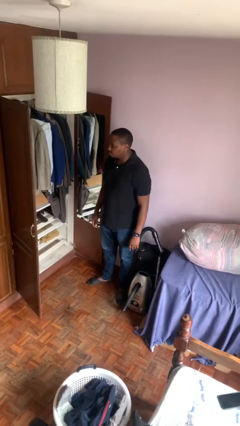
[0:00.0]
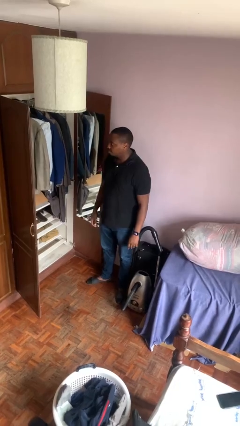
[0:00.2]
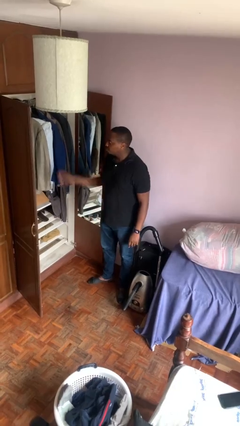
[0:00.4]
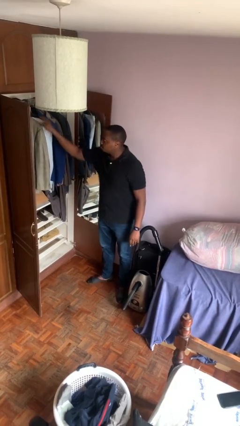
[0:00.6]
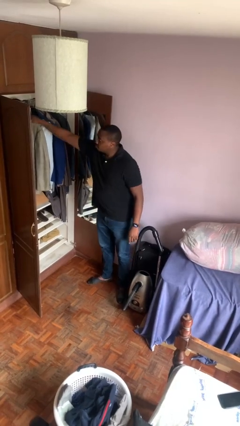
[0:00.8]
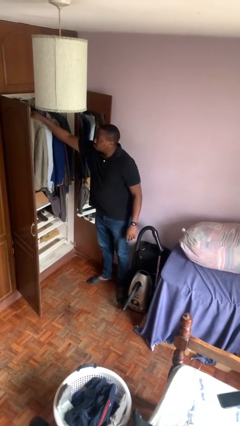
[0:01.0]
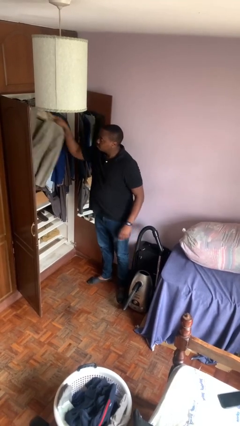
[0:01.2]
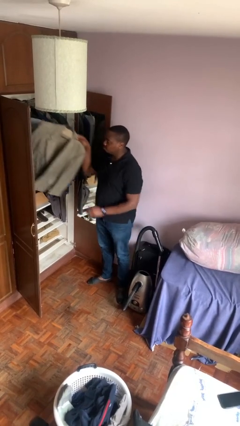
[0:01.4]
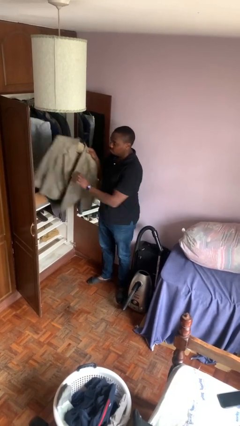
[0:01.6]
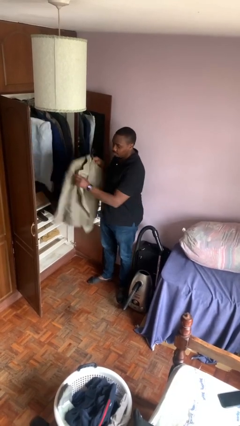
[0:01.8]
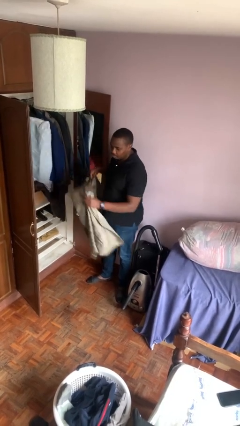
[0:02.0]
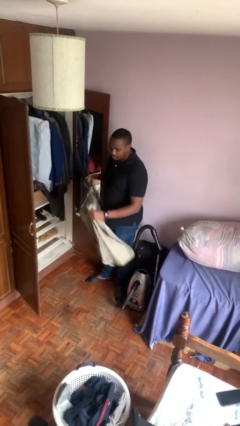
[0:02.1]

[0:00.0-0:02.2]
person takes clothes from closet

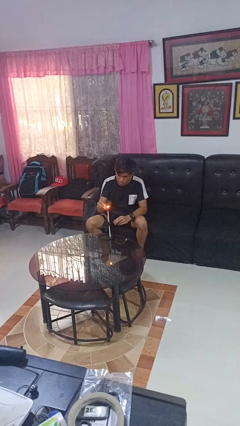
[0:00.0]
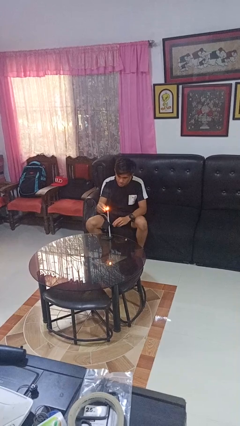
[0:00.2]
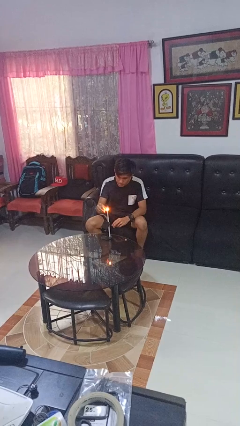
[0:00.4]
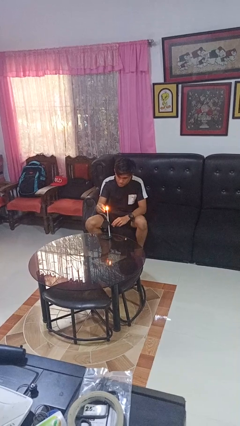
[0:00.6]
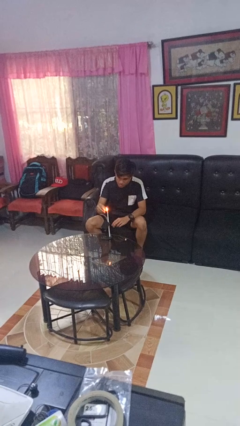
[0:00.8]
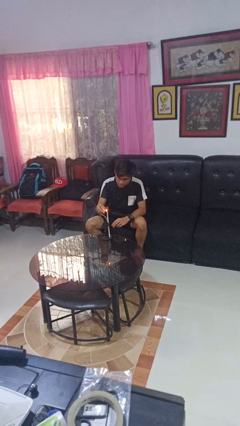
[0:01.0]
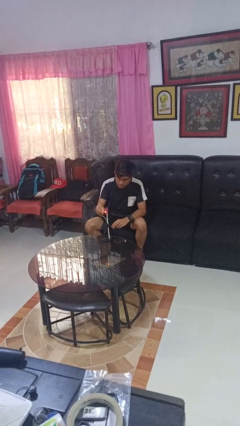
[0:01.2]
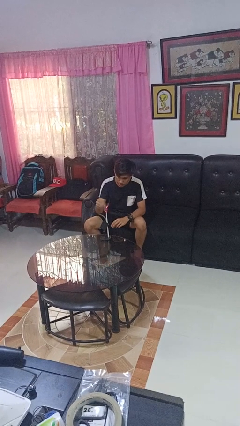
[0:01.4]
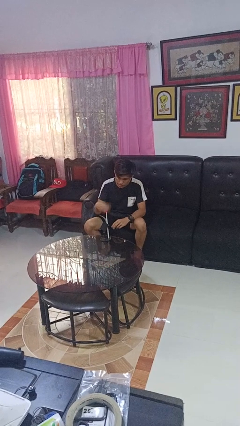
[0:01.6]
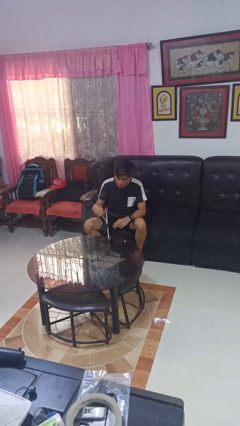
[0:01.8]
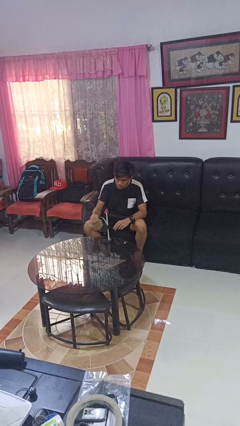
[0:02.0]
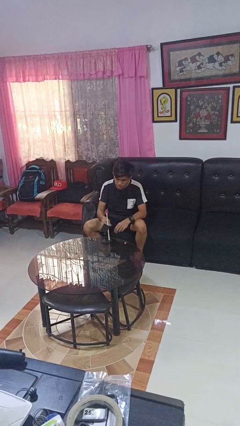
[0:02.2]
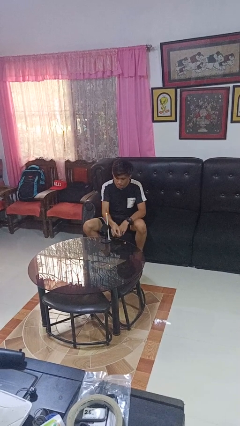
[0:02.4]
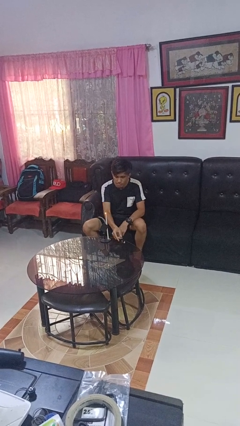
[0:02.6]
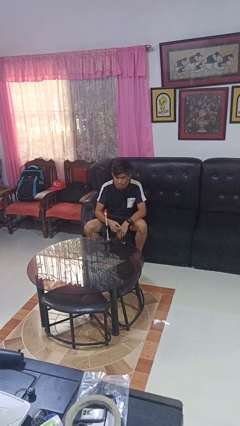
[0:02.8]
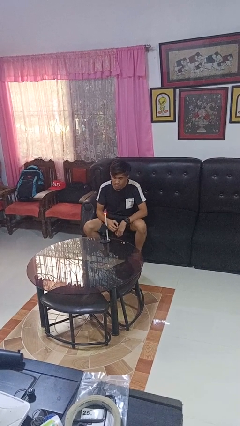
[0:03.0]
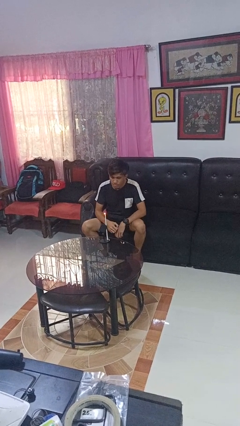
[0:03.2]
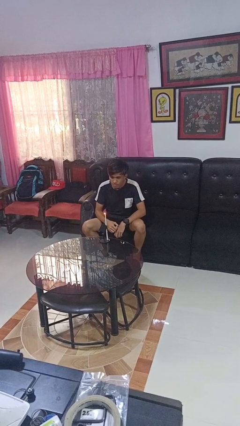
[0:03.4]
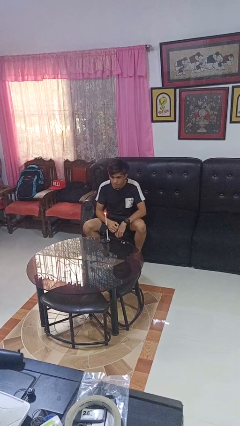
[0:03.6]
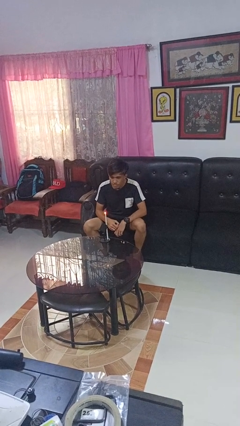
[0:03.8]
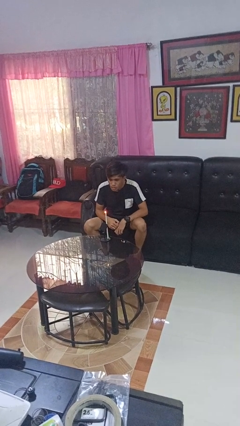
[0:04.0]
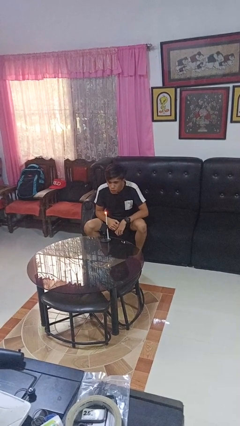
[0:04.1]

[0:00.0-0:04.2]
person lights candle

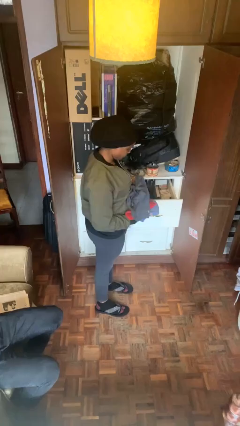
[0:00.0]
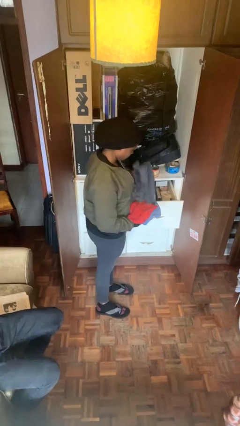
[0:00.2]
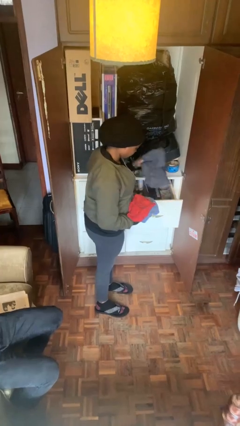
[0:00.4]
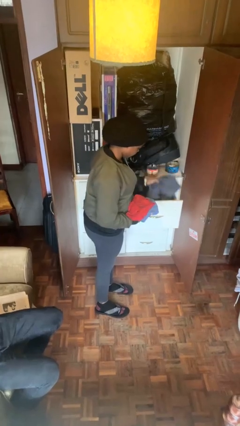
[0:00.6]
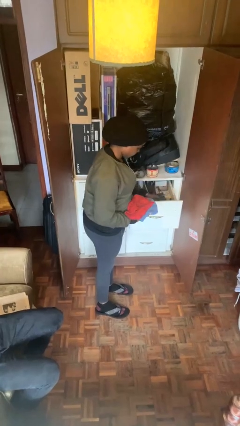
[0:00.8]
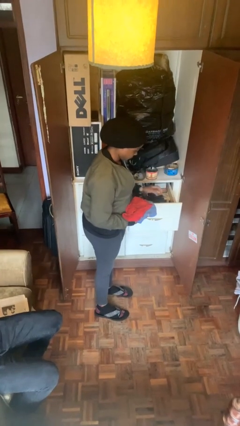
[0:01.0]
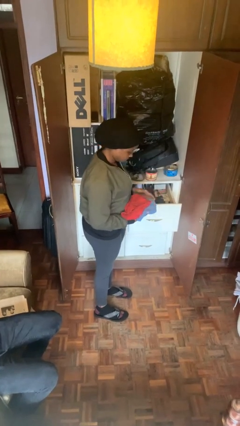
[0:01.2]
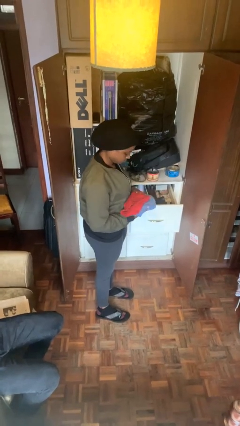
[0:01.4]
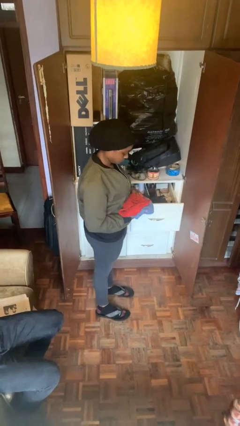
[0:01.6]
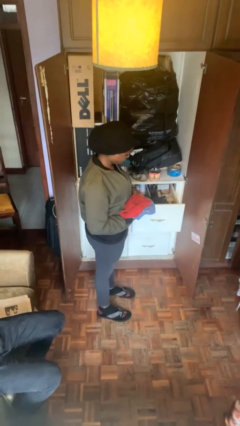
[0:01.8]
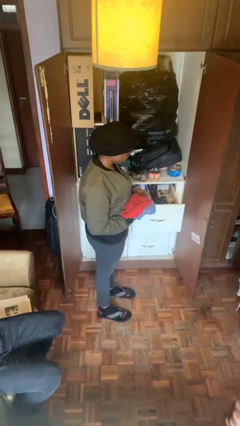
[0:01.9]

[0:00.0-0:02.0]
person puts clothes into dresser

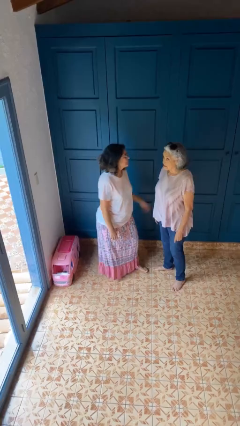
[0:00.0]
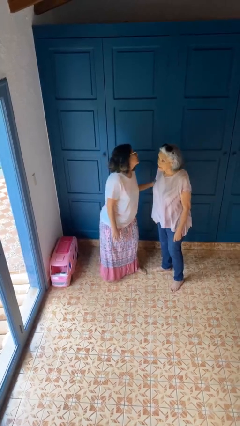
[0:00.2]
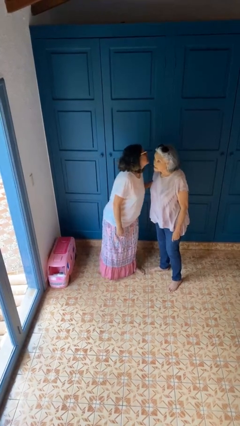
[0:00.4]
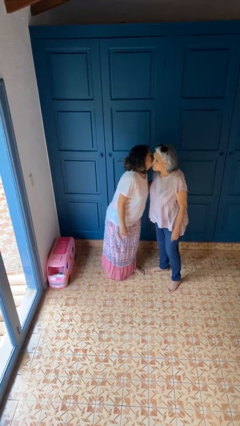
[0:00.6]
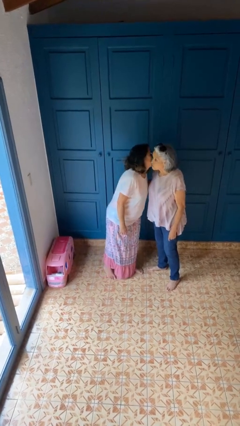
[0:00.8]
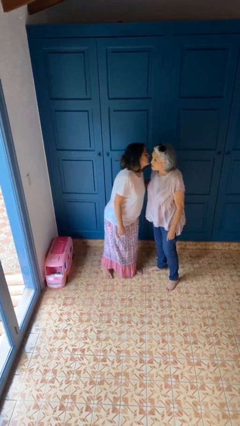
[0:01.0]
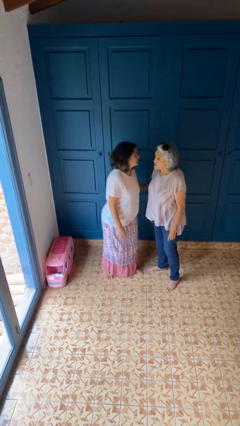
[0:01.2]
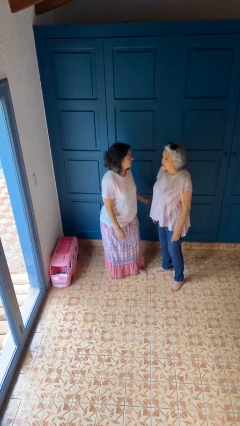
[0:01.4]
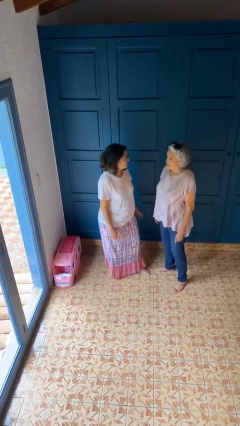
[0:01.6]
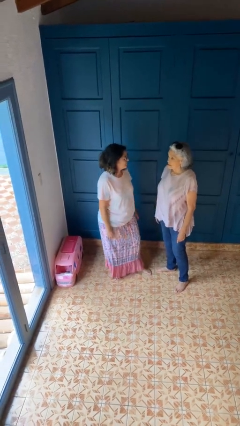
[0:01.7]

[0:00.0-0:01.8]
person kisses cheek of person

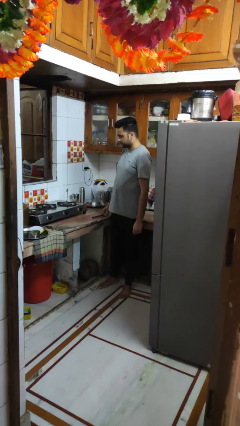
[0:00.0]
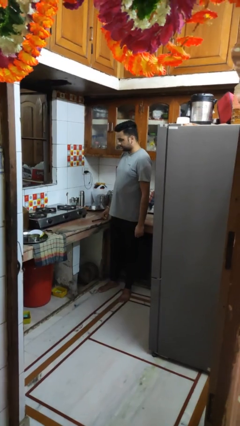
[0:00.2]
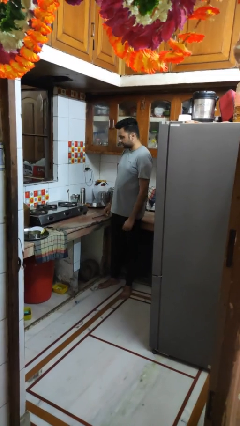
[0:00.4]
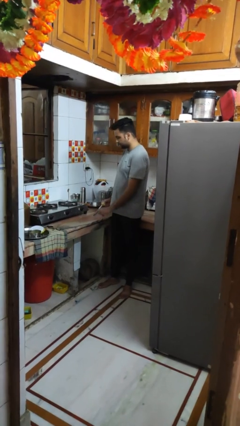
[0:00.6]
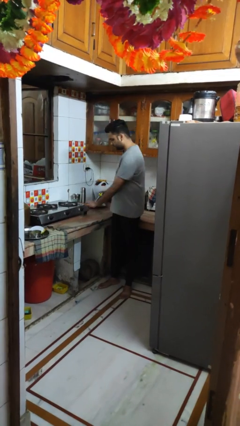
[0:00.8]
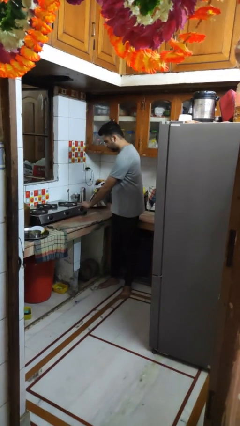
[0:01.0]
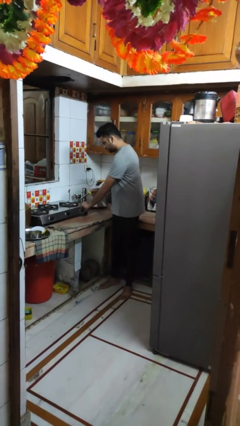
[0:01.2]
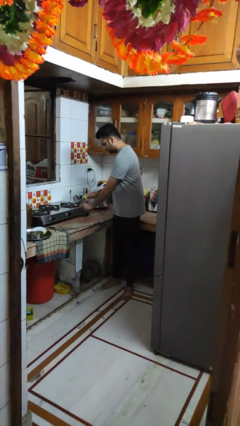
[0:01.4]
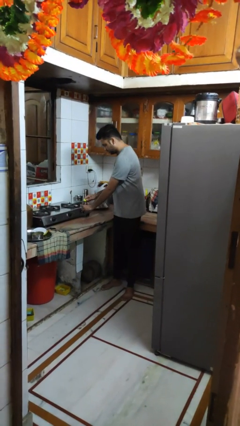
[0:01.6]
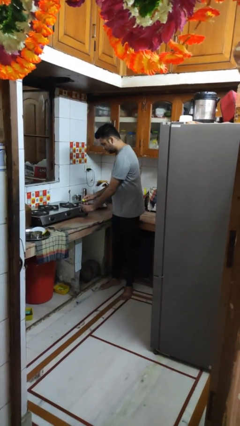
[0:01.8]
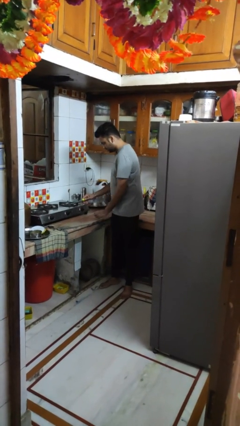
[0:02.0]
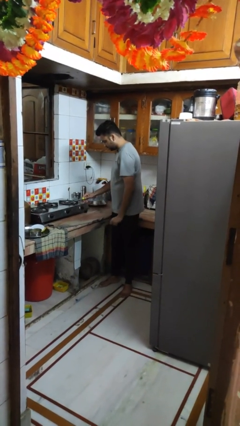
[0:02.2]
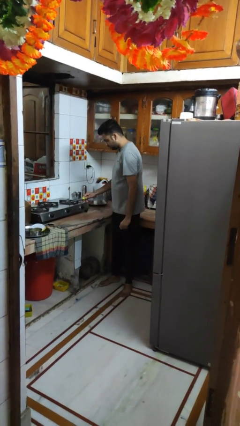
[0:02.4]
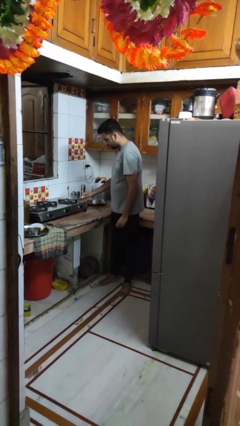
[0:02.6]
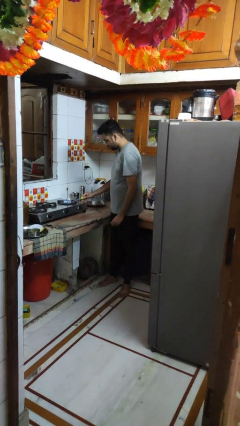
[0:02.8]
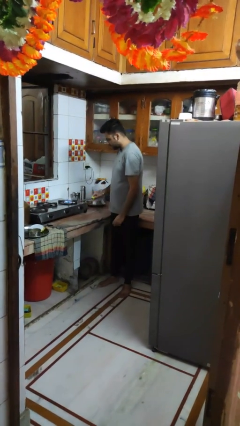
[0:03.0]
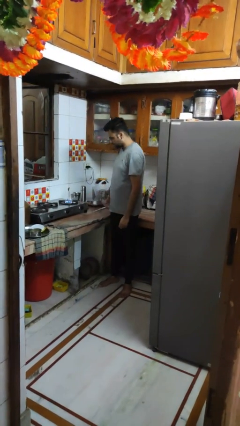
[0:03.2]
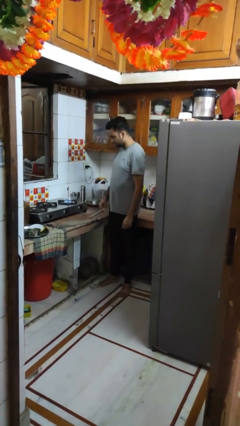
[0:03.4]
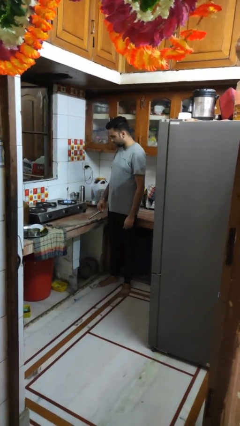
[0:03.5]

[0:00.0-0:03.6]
person turns on stovetop

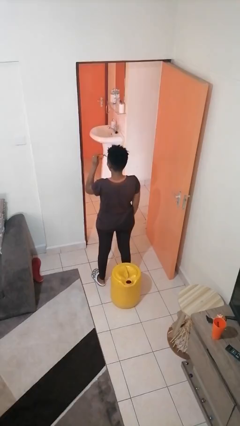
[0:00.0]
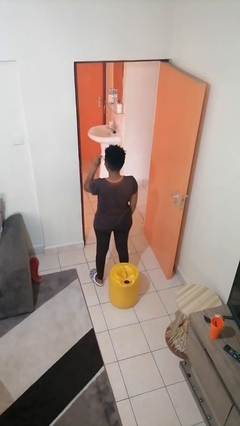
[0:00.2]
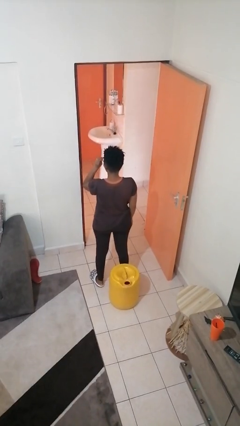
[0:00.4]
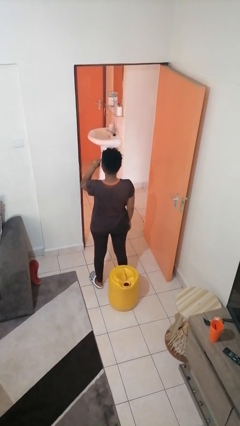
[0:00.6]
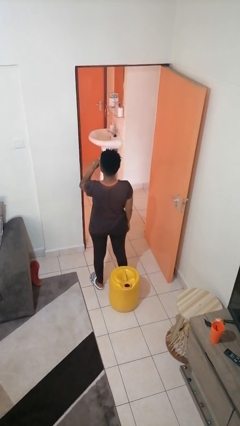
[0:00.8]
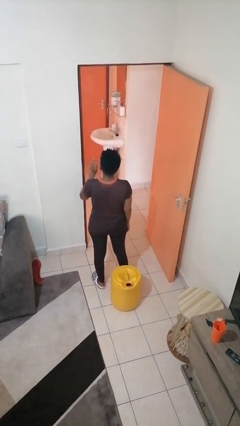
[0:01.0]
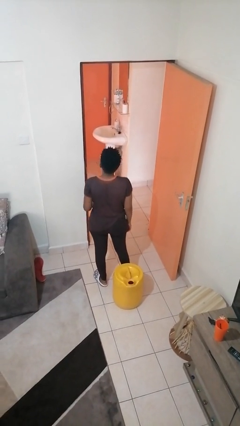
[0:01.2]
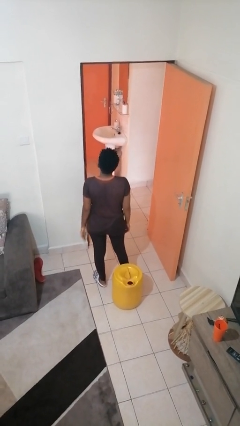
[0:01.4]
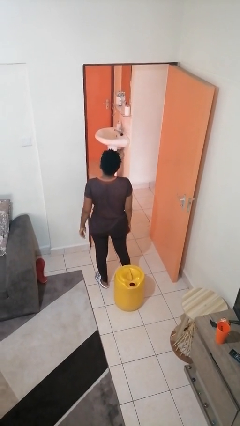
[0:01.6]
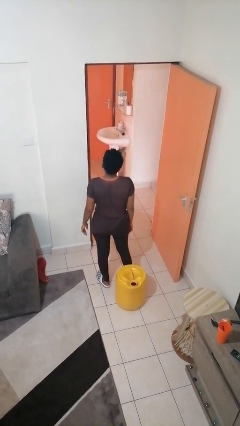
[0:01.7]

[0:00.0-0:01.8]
person puts on glasses

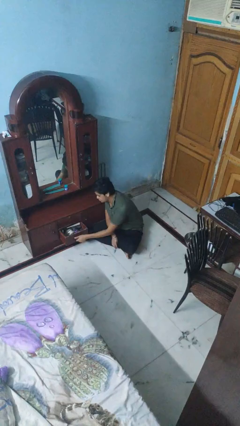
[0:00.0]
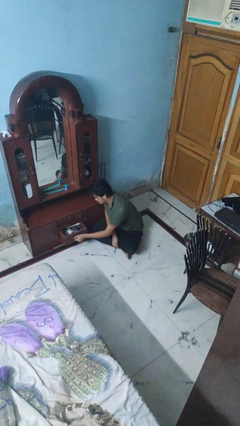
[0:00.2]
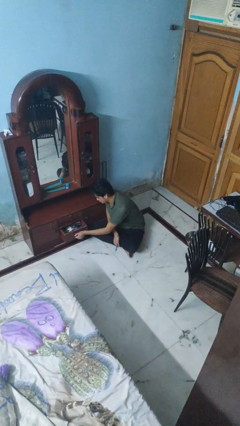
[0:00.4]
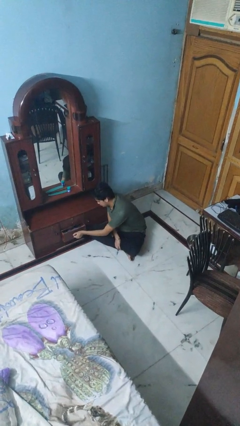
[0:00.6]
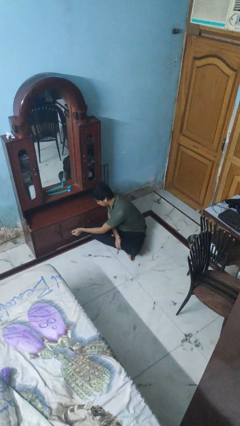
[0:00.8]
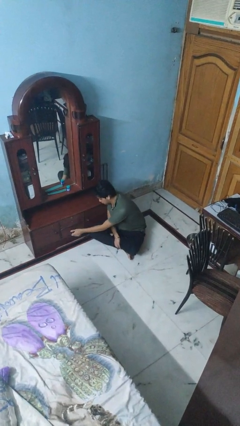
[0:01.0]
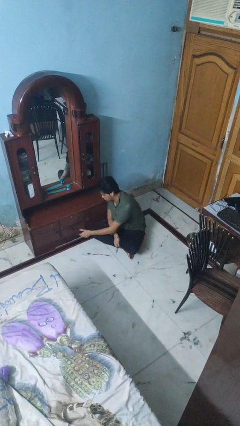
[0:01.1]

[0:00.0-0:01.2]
person closes dresser drawer

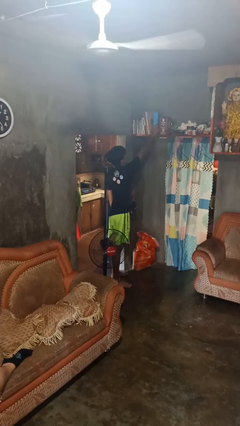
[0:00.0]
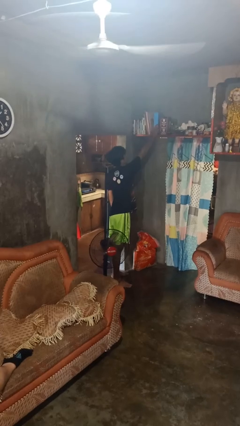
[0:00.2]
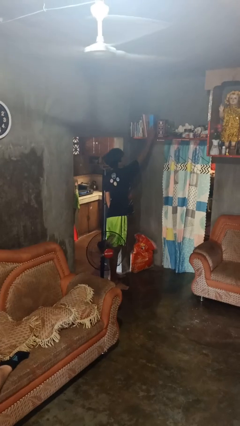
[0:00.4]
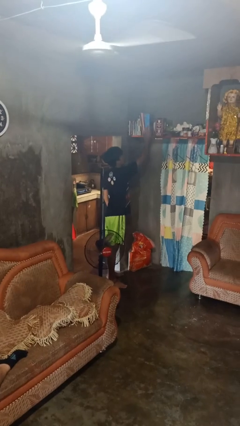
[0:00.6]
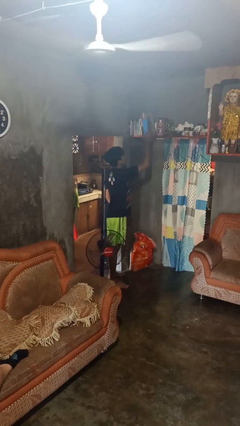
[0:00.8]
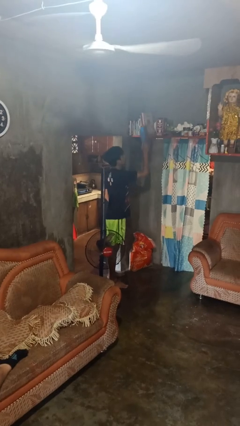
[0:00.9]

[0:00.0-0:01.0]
person picks up object from shelf
